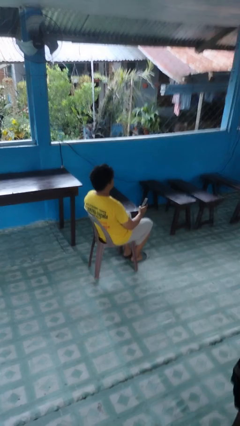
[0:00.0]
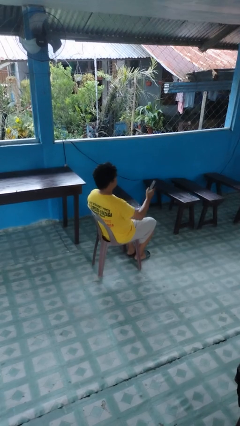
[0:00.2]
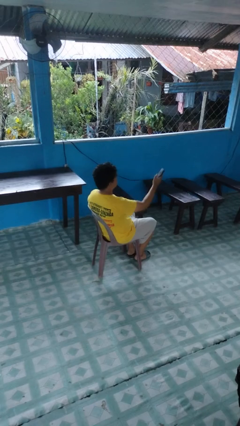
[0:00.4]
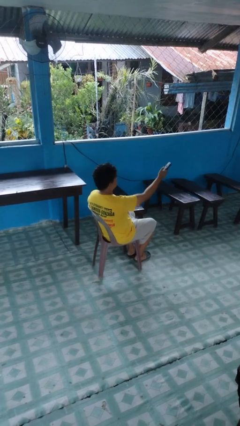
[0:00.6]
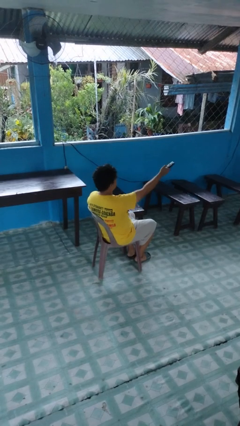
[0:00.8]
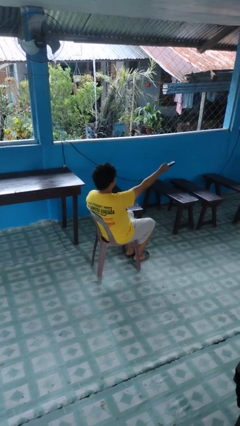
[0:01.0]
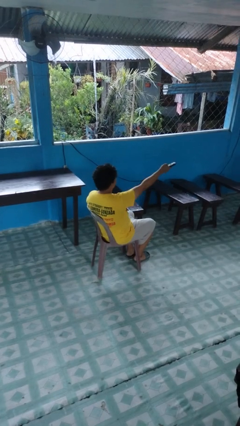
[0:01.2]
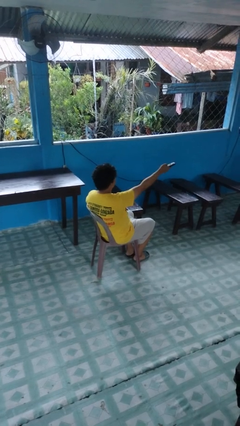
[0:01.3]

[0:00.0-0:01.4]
person uses television remote

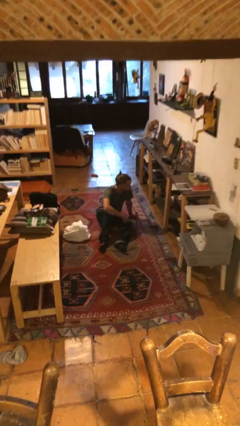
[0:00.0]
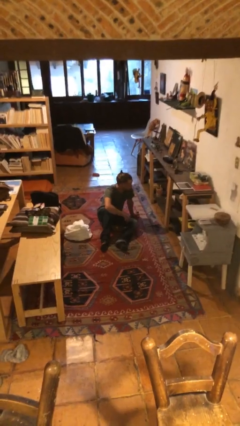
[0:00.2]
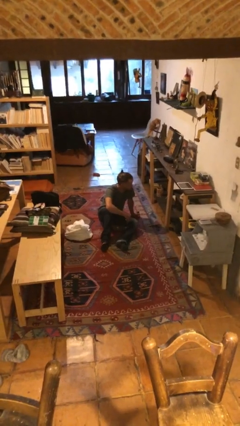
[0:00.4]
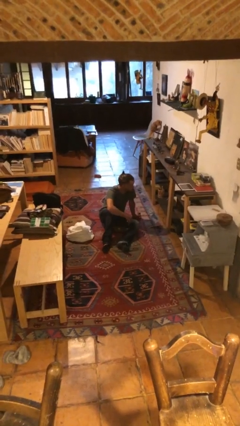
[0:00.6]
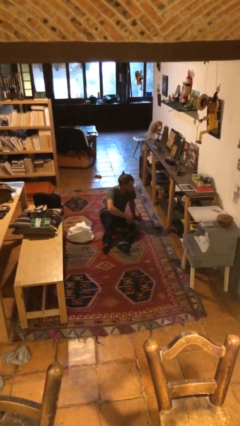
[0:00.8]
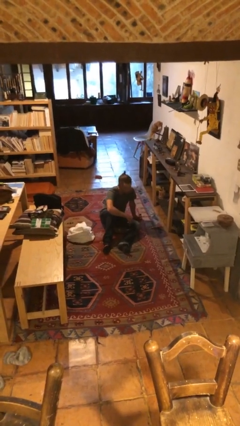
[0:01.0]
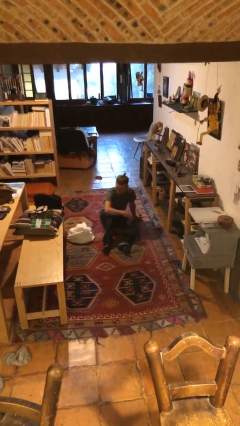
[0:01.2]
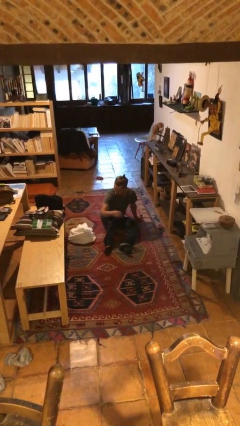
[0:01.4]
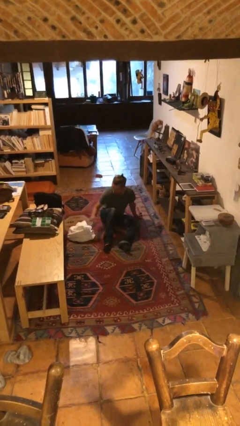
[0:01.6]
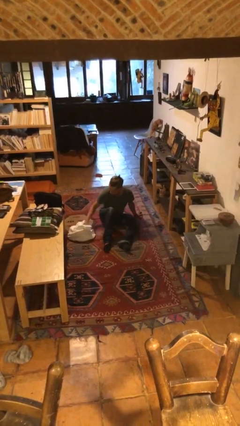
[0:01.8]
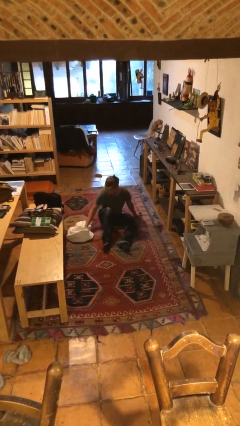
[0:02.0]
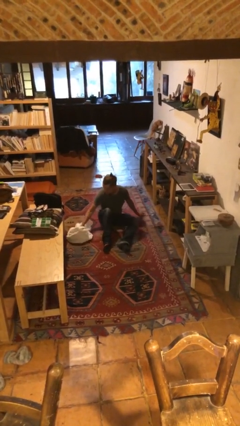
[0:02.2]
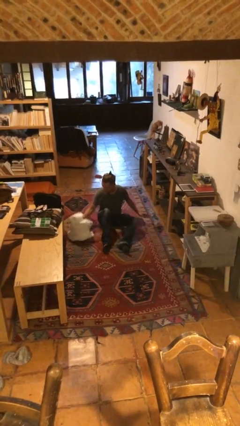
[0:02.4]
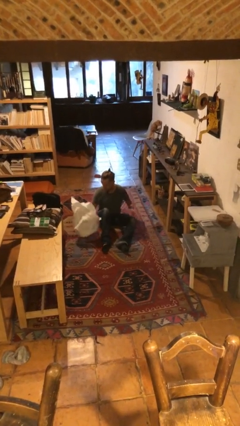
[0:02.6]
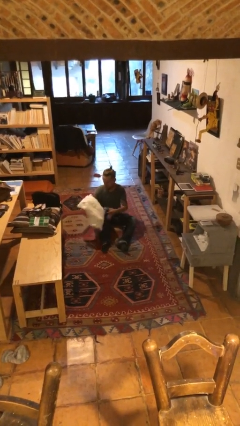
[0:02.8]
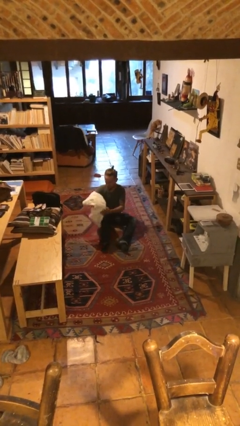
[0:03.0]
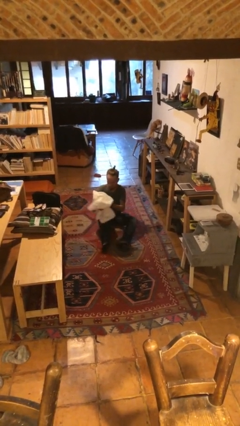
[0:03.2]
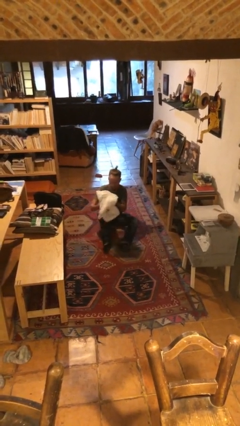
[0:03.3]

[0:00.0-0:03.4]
person picks up object from floor

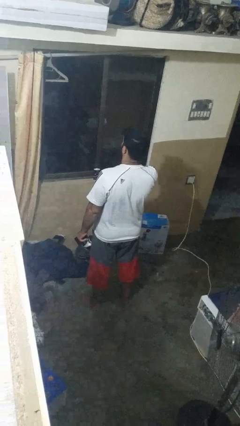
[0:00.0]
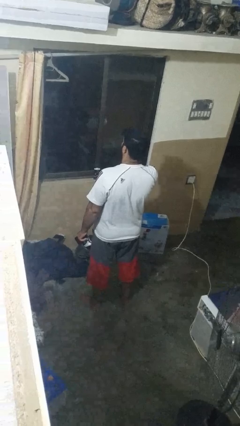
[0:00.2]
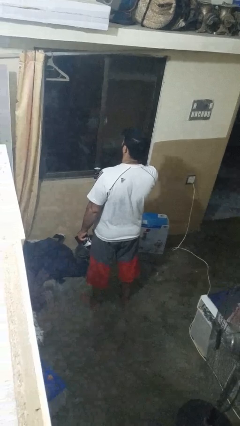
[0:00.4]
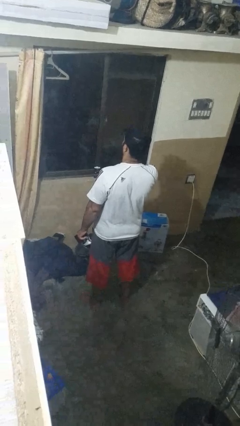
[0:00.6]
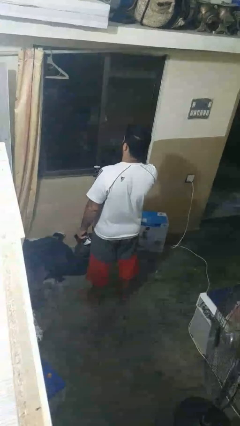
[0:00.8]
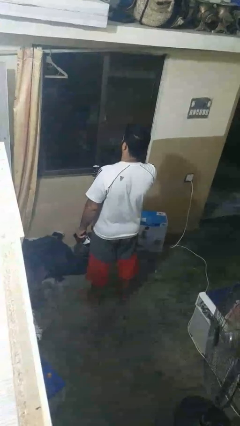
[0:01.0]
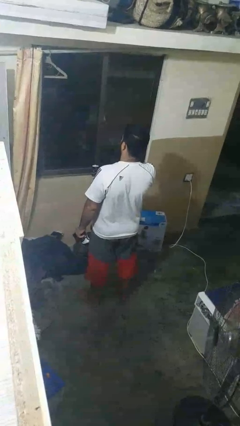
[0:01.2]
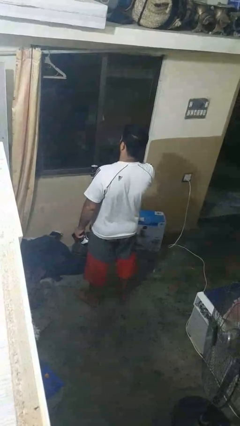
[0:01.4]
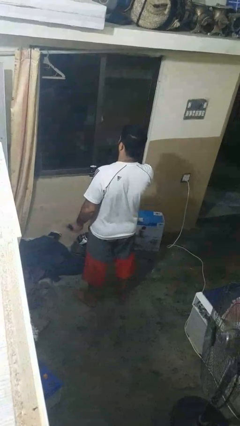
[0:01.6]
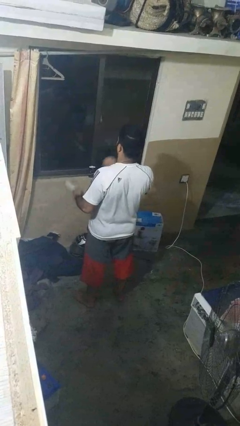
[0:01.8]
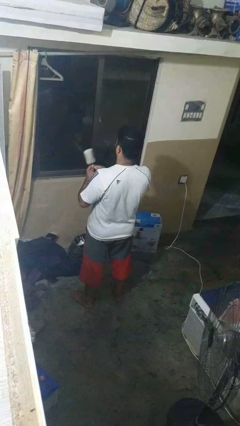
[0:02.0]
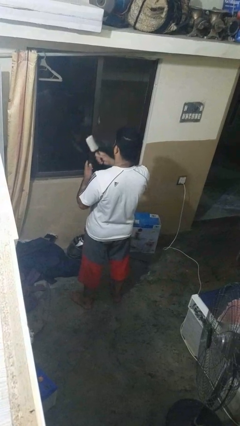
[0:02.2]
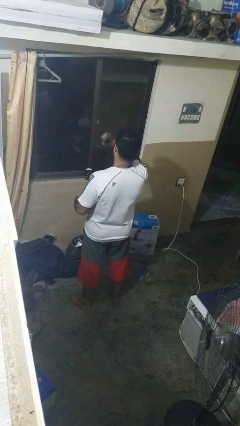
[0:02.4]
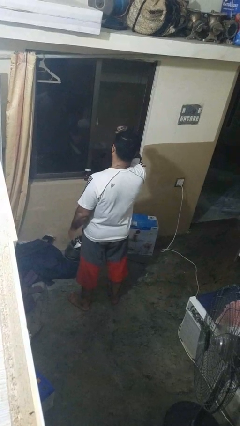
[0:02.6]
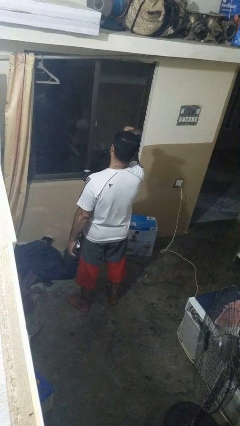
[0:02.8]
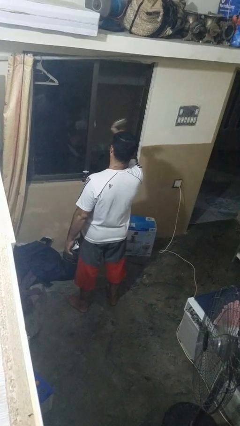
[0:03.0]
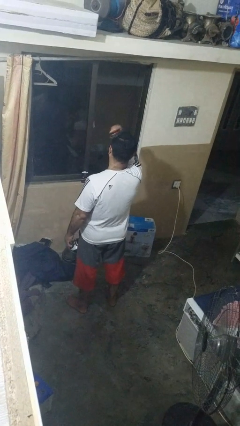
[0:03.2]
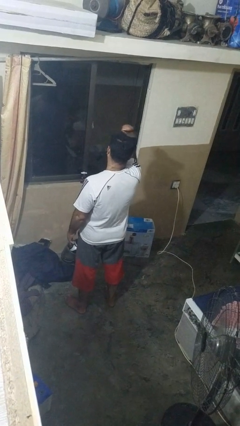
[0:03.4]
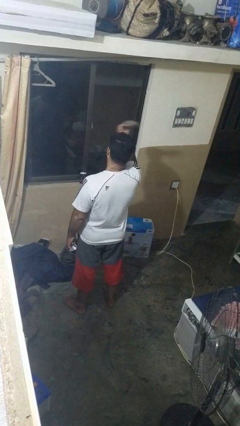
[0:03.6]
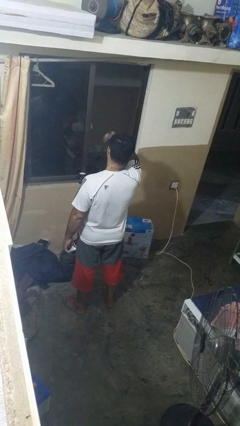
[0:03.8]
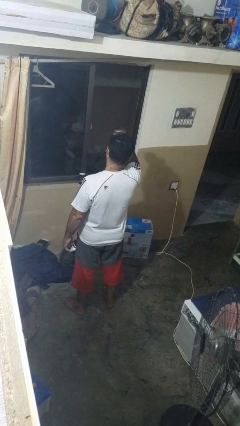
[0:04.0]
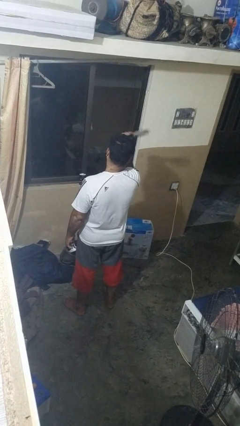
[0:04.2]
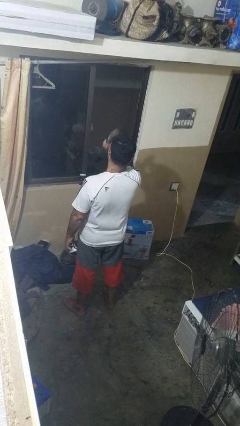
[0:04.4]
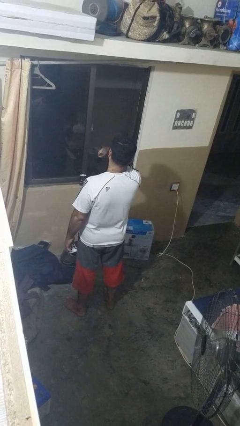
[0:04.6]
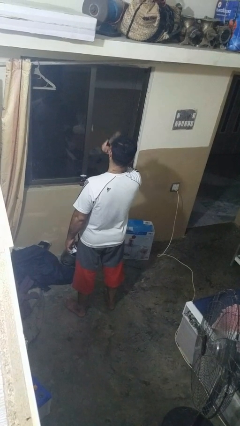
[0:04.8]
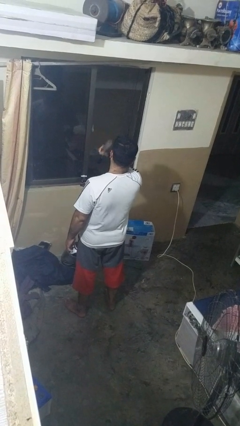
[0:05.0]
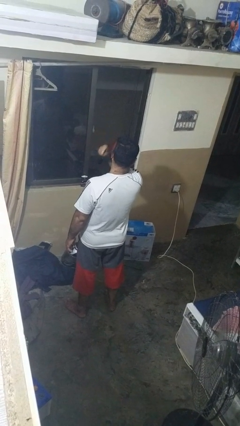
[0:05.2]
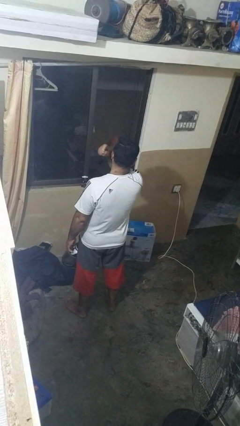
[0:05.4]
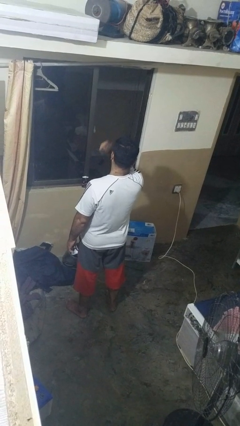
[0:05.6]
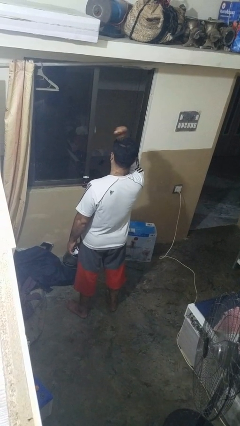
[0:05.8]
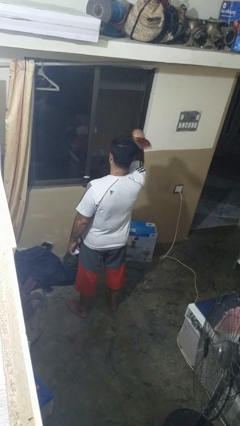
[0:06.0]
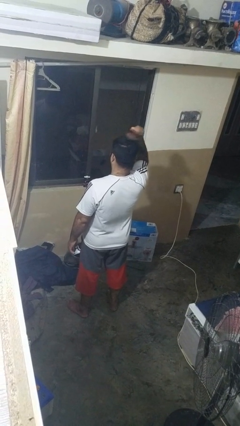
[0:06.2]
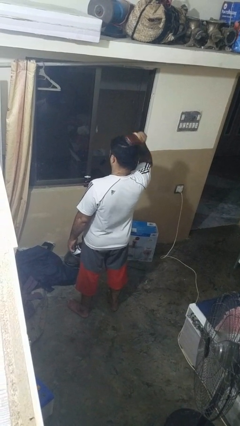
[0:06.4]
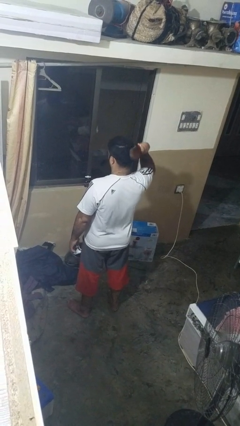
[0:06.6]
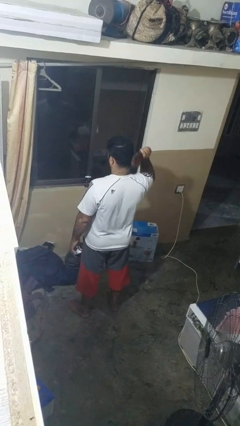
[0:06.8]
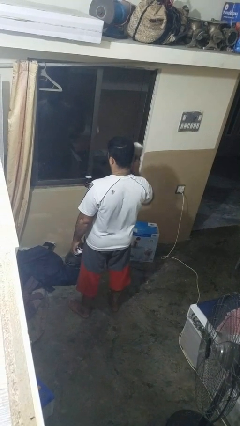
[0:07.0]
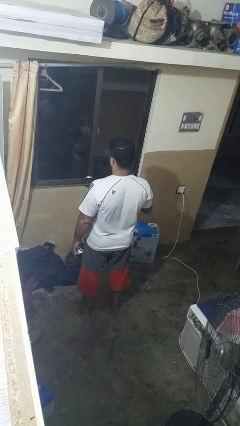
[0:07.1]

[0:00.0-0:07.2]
person brushes hair

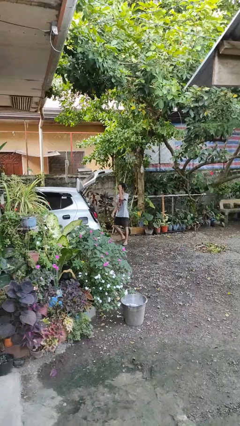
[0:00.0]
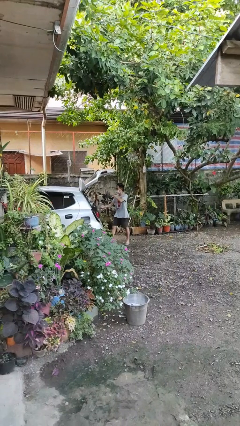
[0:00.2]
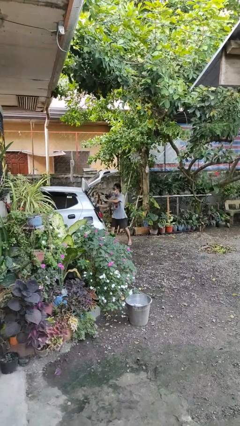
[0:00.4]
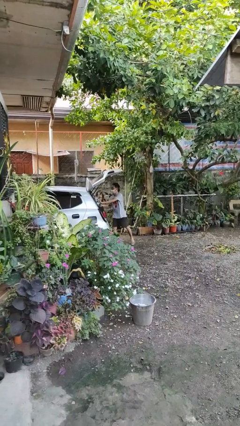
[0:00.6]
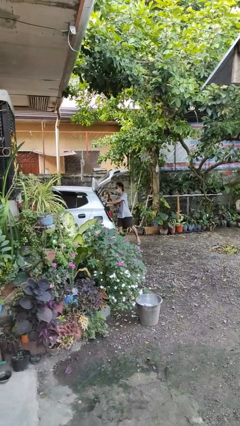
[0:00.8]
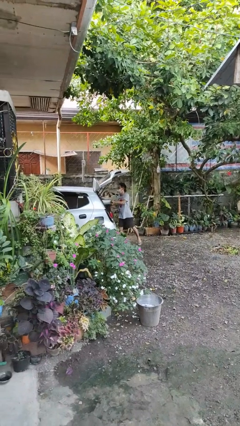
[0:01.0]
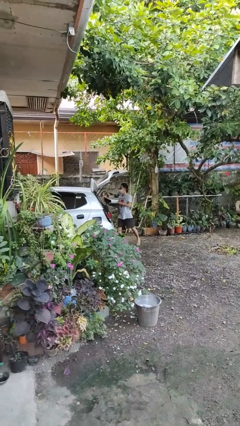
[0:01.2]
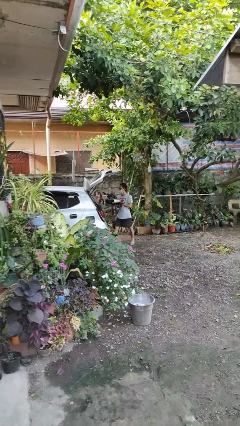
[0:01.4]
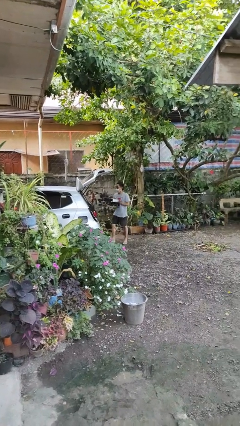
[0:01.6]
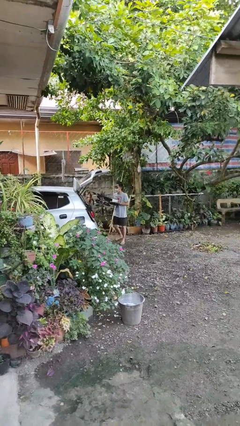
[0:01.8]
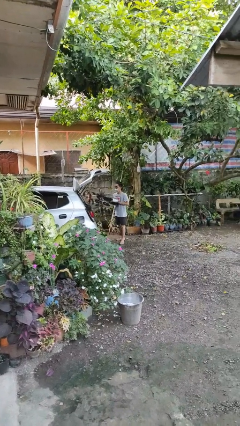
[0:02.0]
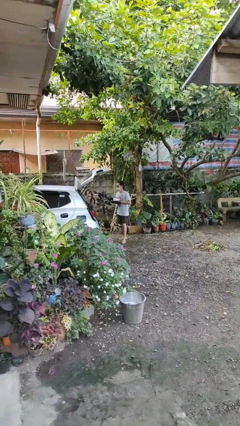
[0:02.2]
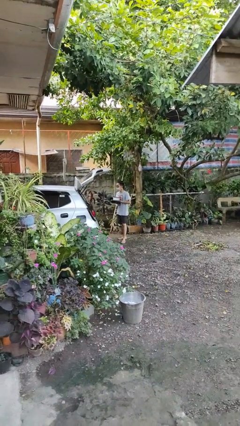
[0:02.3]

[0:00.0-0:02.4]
person unloads car

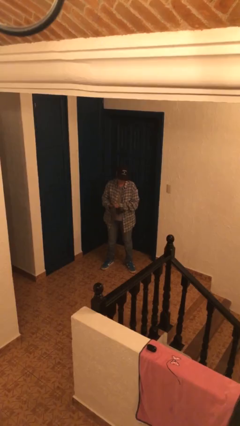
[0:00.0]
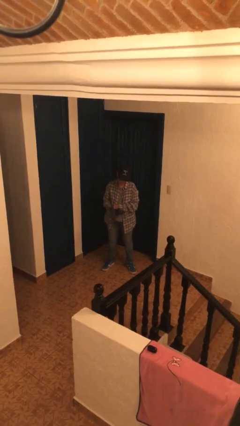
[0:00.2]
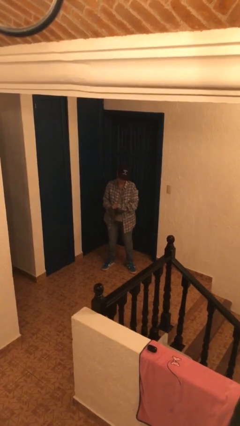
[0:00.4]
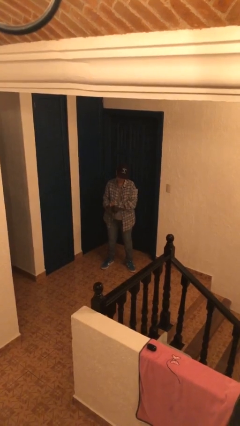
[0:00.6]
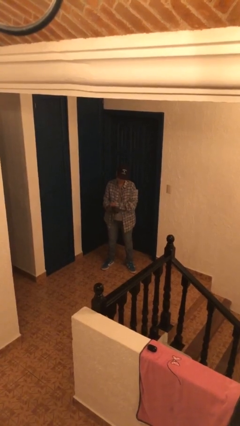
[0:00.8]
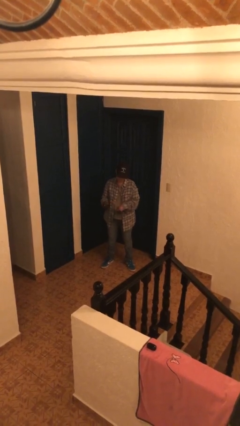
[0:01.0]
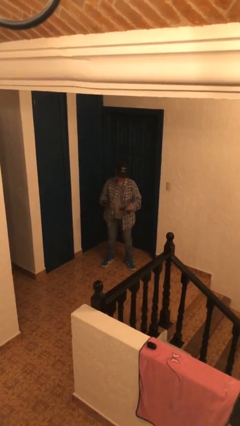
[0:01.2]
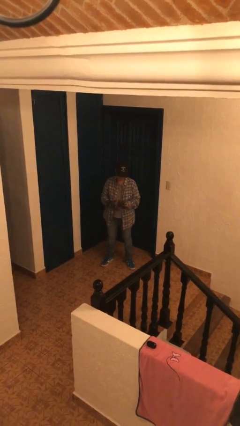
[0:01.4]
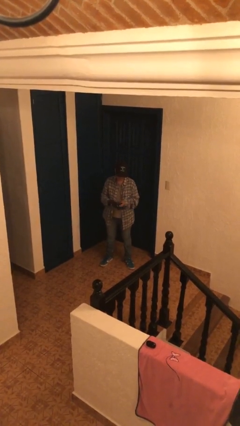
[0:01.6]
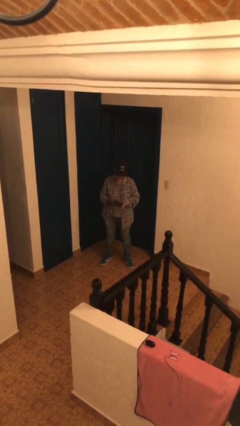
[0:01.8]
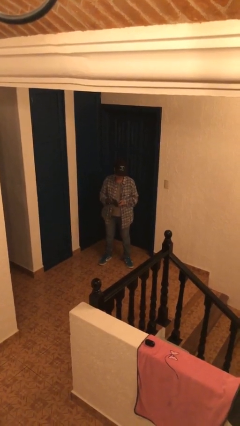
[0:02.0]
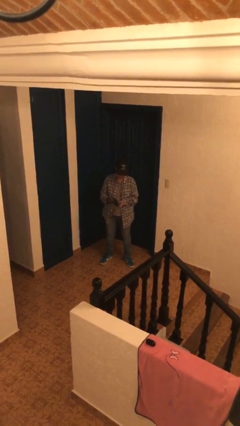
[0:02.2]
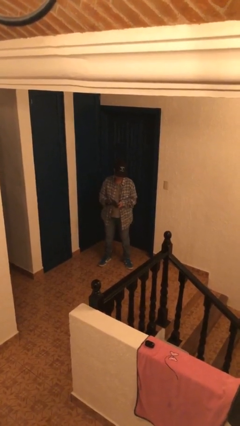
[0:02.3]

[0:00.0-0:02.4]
person puts on gloves

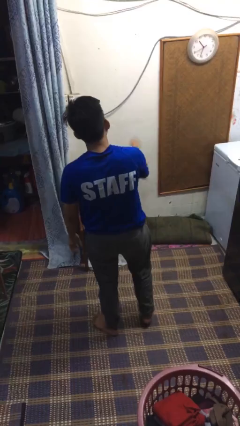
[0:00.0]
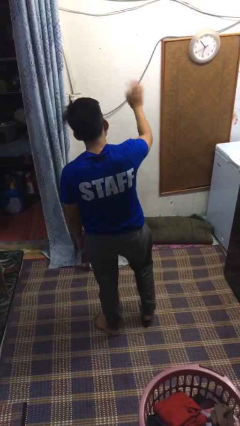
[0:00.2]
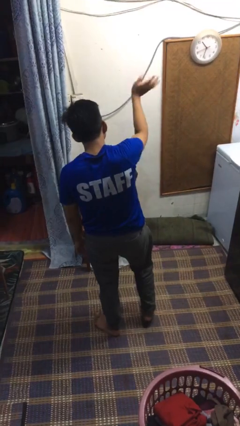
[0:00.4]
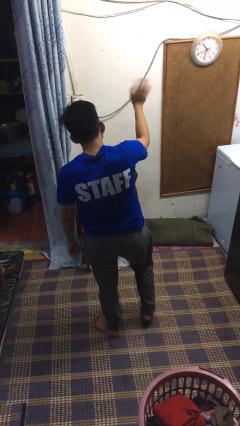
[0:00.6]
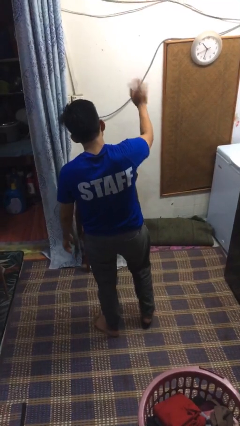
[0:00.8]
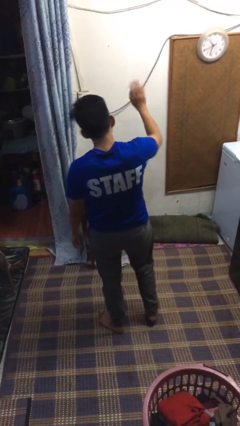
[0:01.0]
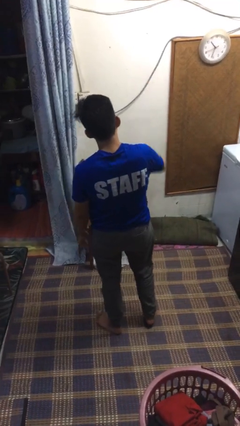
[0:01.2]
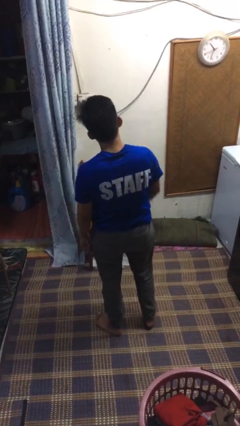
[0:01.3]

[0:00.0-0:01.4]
person waves at person
